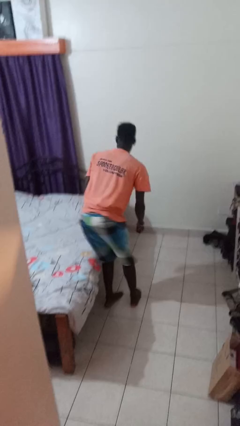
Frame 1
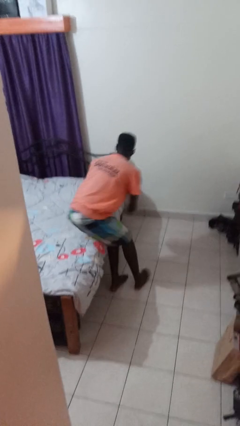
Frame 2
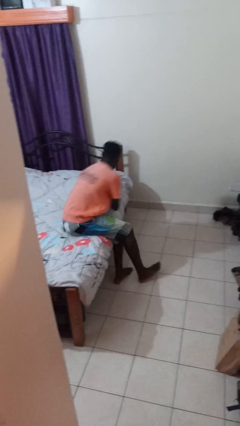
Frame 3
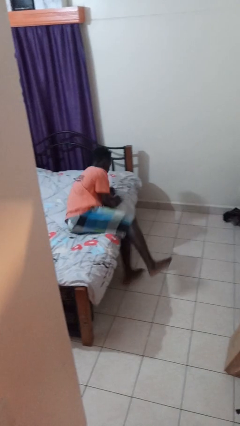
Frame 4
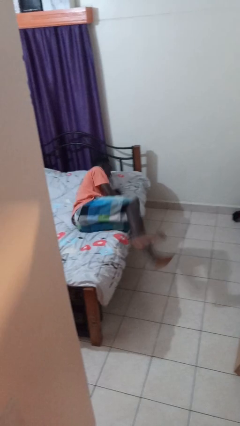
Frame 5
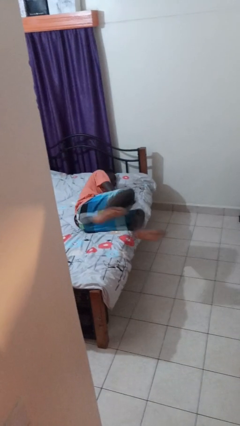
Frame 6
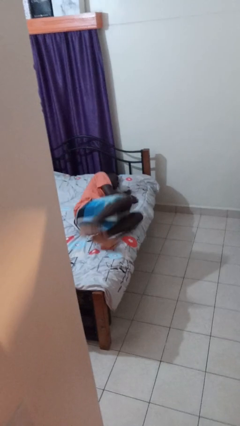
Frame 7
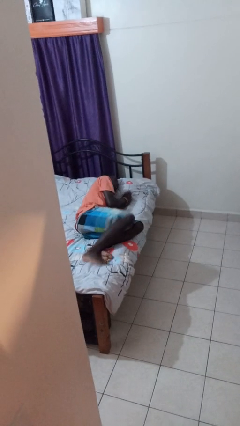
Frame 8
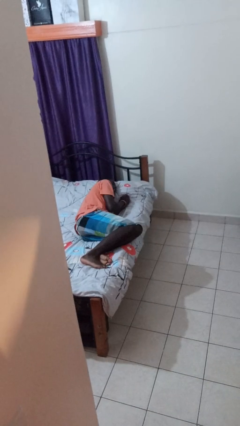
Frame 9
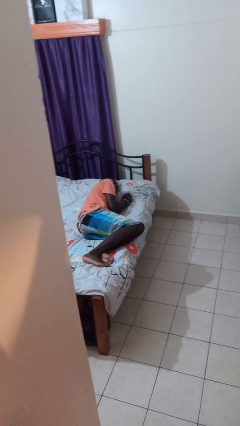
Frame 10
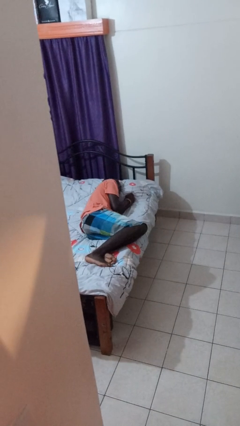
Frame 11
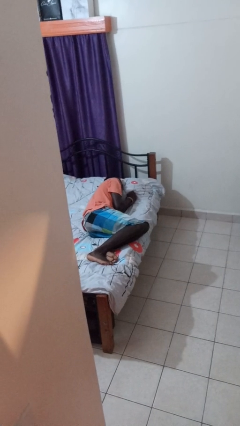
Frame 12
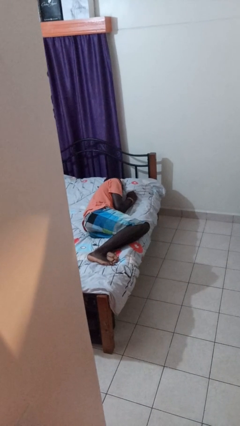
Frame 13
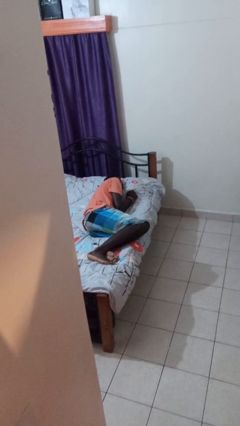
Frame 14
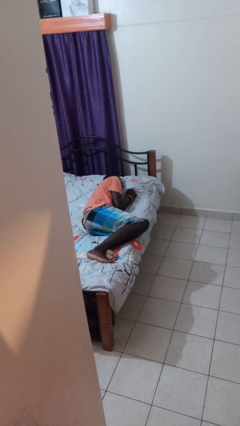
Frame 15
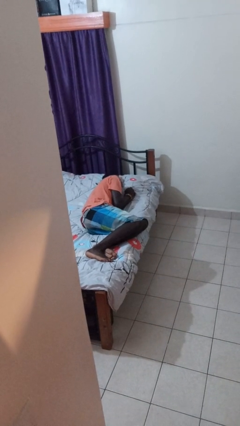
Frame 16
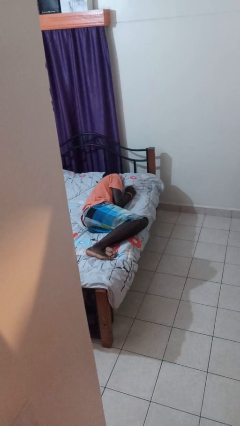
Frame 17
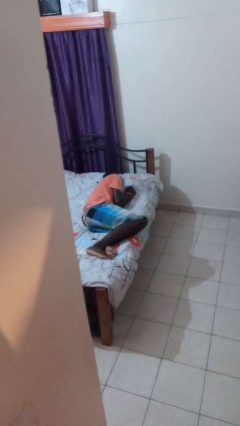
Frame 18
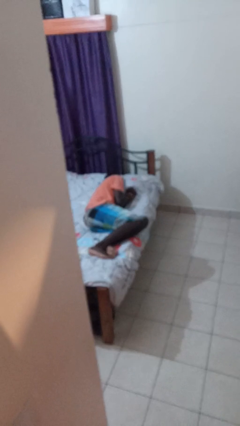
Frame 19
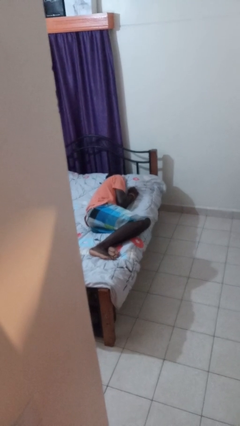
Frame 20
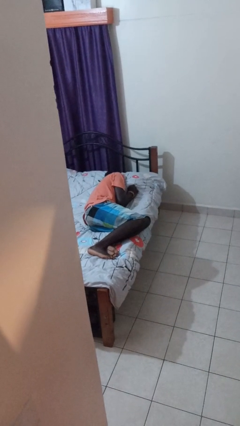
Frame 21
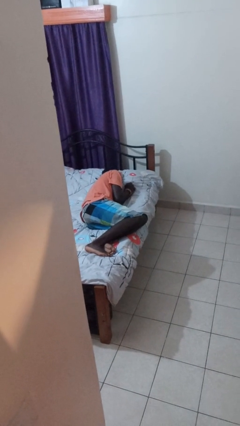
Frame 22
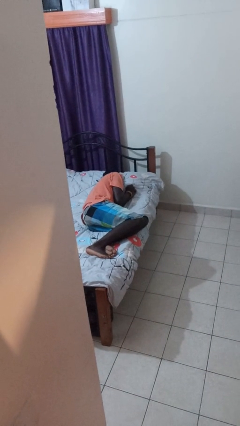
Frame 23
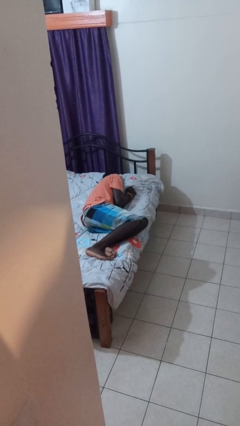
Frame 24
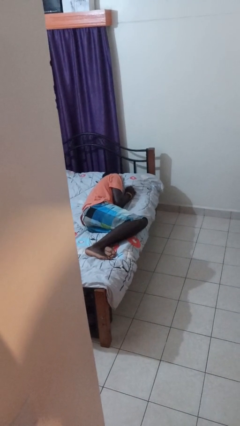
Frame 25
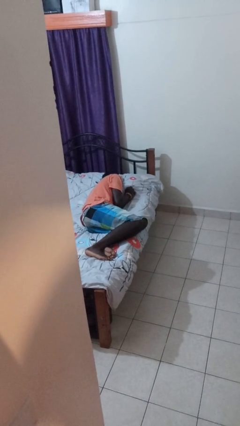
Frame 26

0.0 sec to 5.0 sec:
person lies down on bed

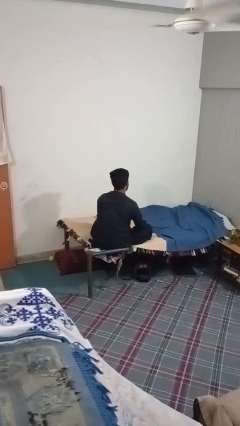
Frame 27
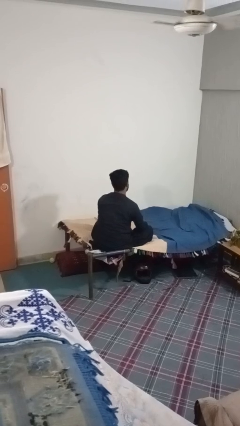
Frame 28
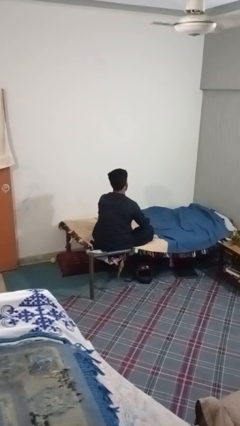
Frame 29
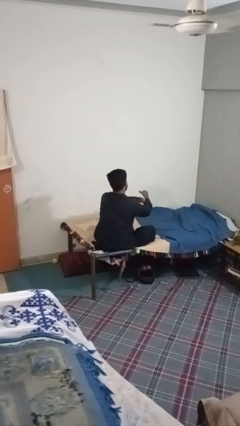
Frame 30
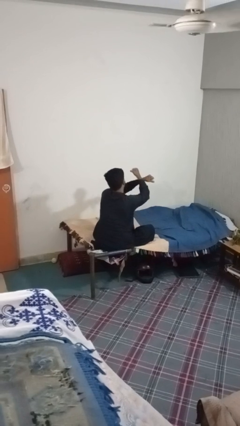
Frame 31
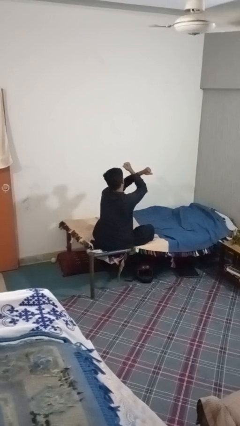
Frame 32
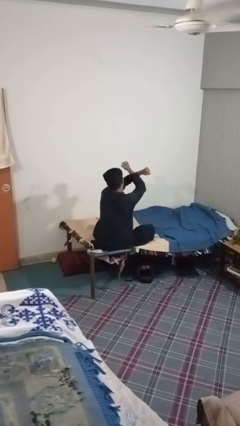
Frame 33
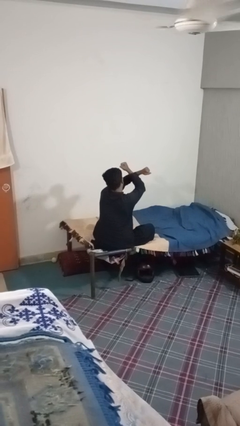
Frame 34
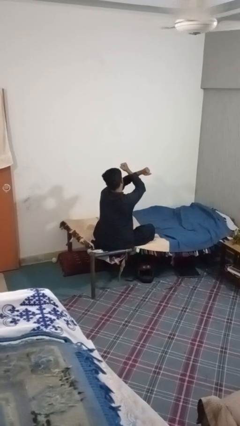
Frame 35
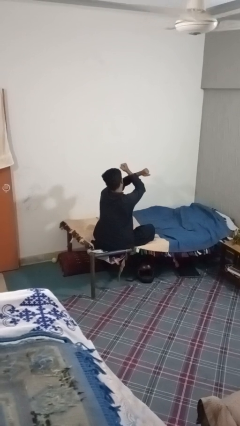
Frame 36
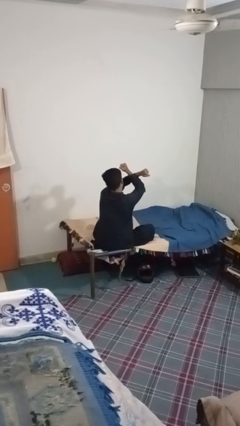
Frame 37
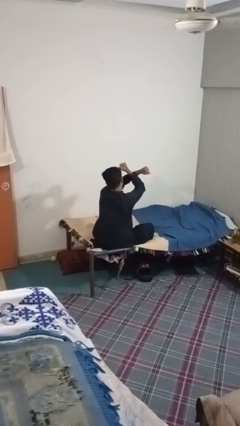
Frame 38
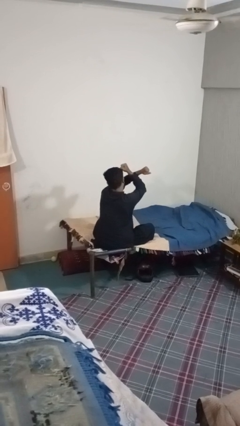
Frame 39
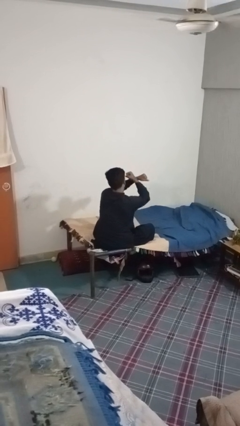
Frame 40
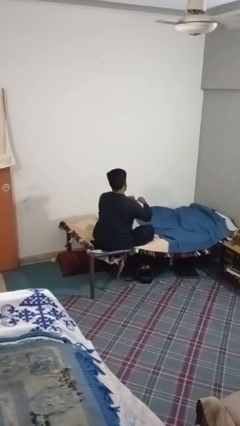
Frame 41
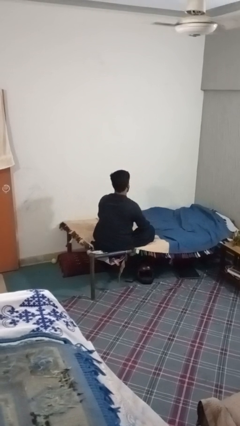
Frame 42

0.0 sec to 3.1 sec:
person gestures arms x

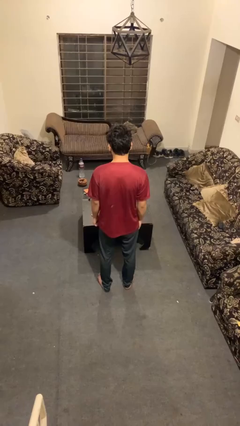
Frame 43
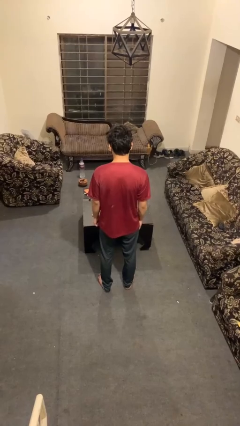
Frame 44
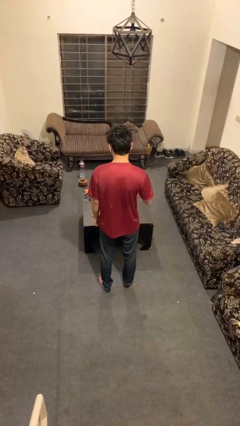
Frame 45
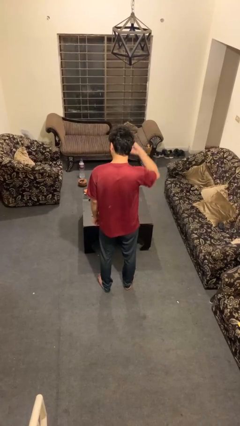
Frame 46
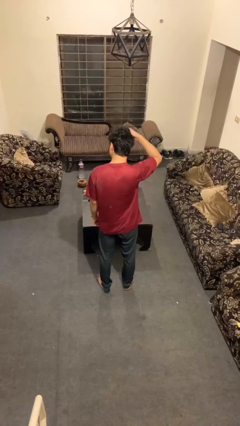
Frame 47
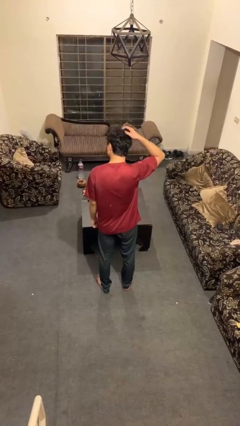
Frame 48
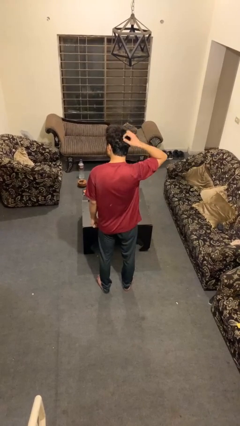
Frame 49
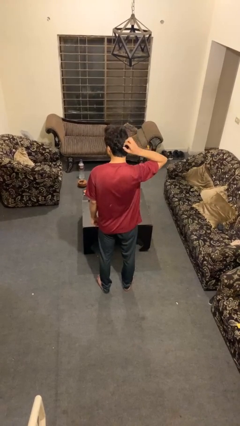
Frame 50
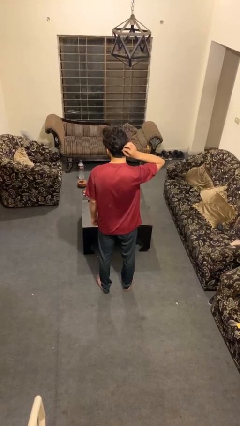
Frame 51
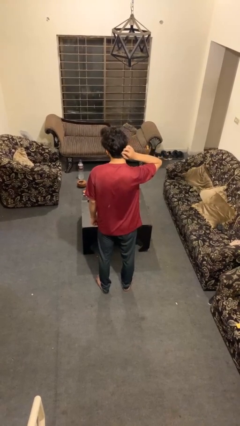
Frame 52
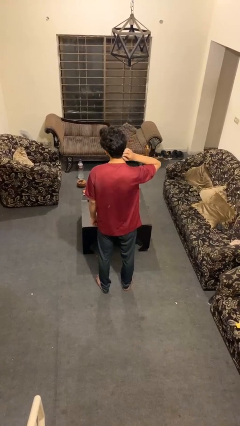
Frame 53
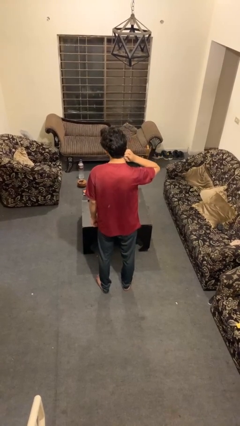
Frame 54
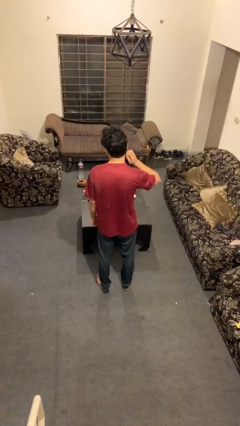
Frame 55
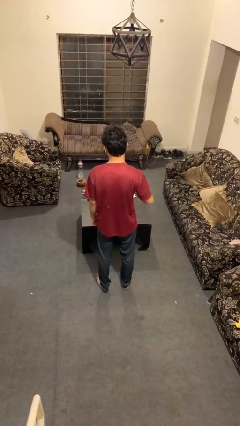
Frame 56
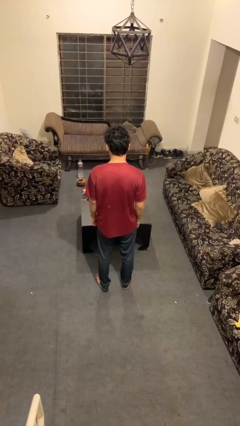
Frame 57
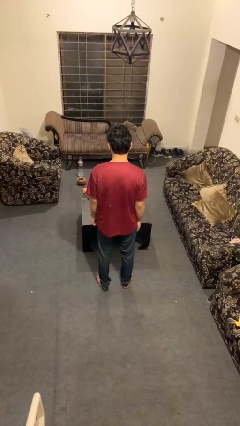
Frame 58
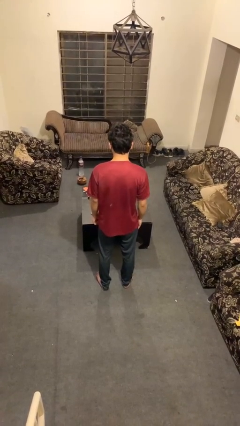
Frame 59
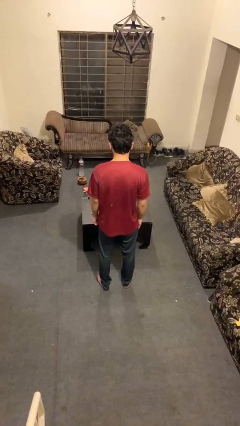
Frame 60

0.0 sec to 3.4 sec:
person strokes hair

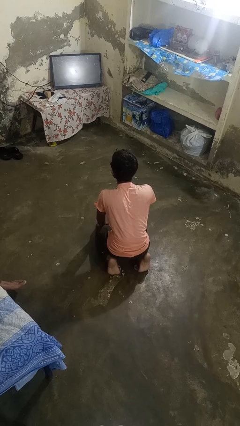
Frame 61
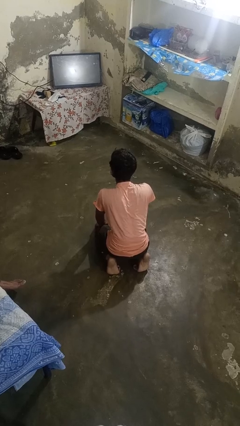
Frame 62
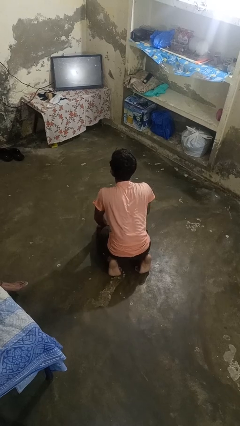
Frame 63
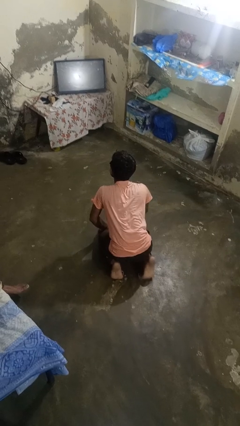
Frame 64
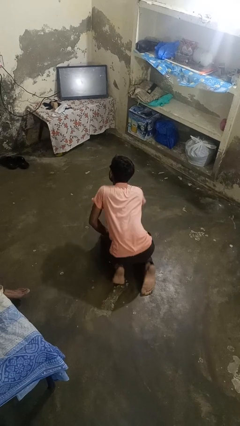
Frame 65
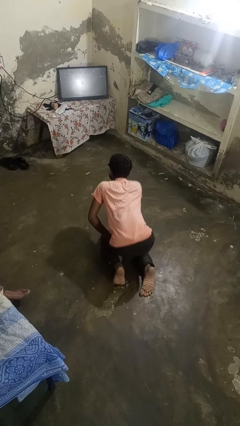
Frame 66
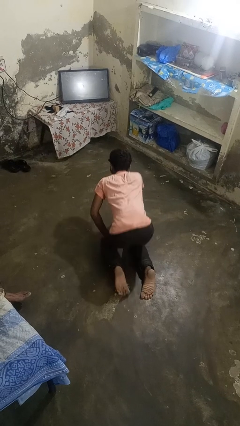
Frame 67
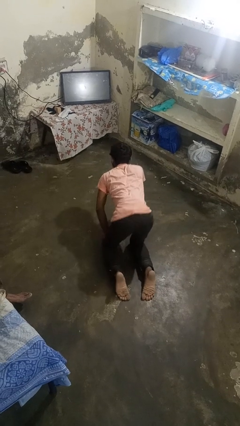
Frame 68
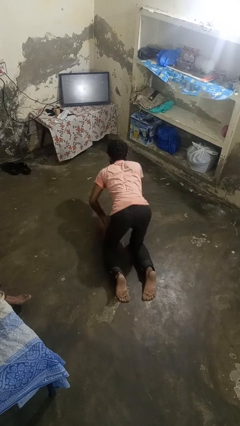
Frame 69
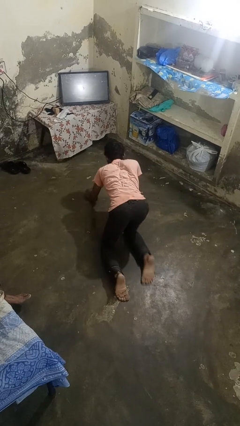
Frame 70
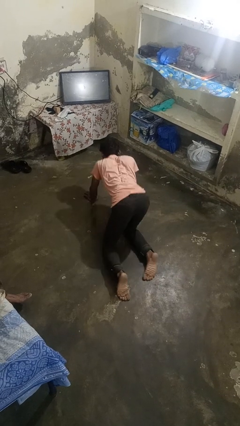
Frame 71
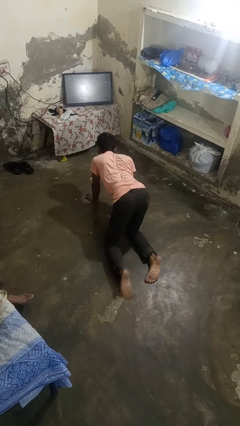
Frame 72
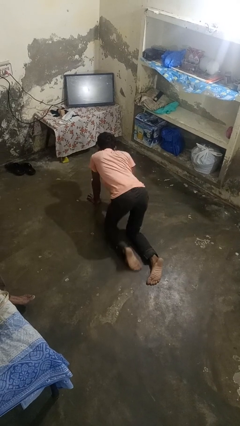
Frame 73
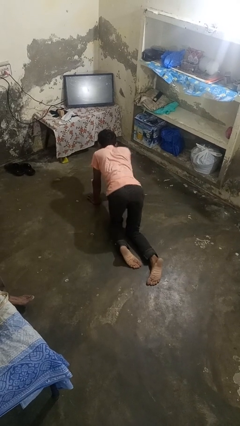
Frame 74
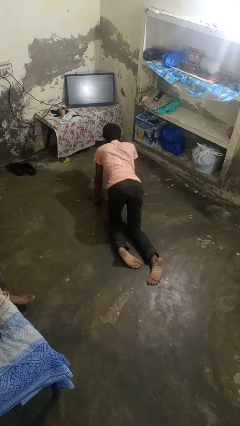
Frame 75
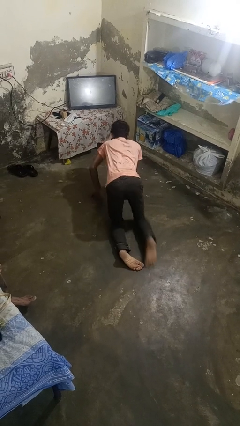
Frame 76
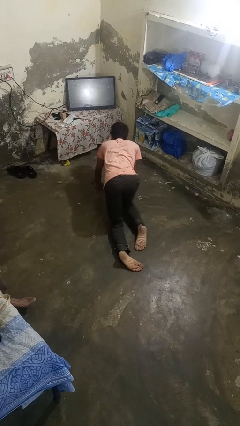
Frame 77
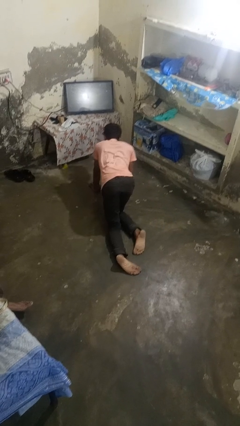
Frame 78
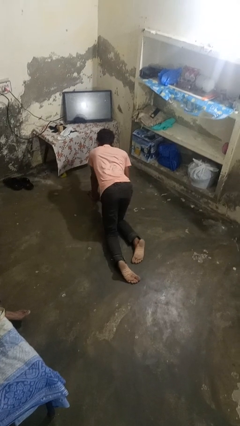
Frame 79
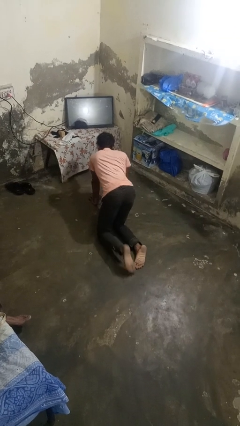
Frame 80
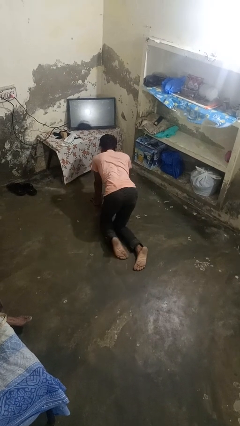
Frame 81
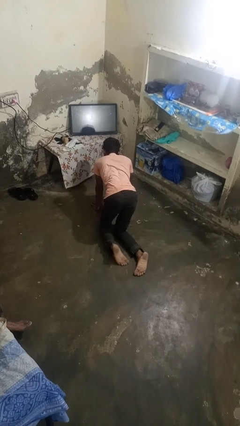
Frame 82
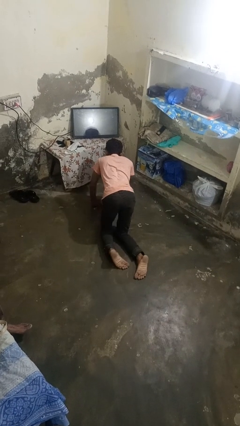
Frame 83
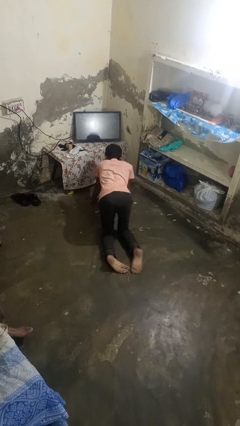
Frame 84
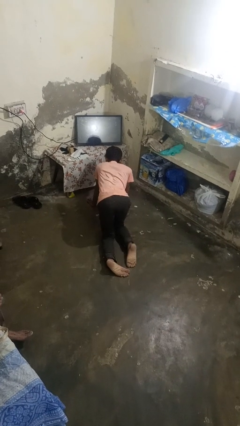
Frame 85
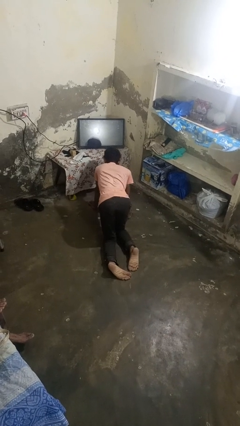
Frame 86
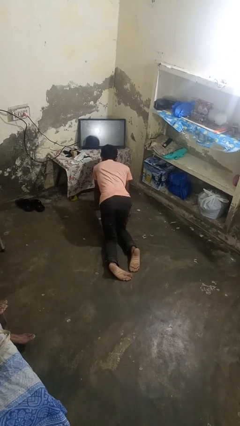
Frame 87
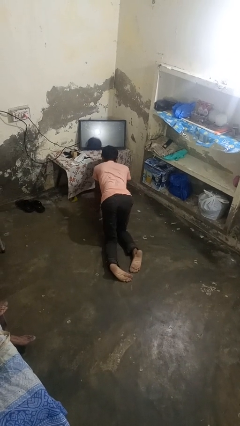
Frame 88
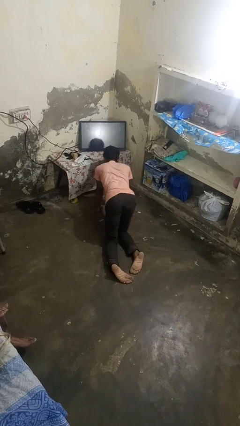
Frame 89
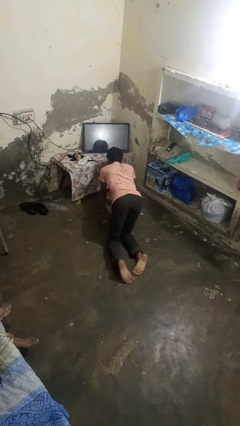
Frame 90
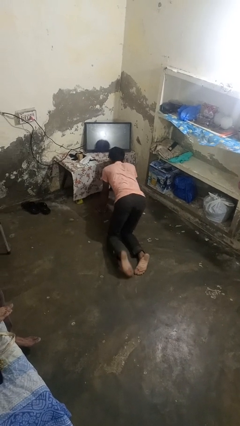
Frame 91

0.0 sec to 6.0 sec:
person crawls

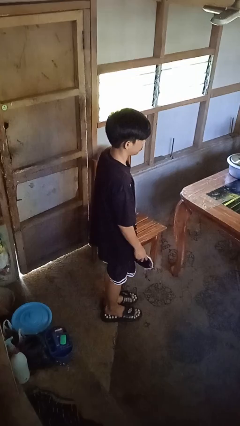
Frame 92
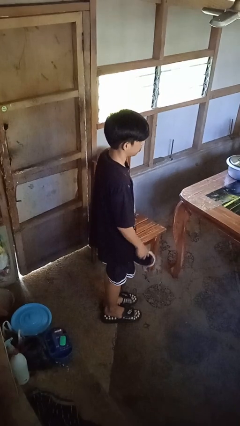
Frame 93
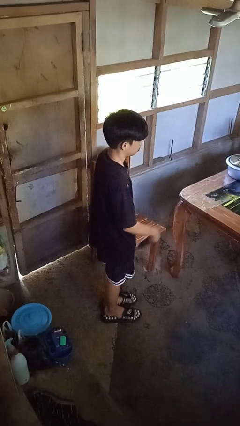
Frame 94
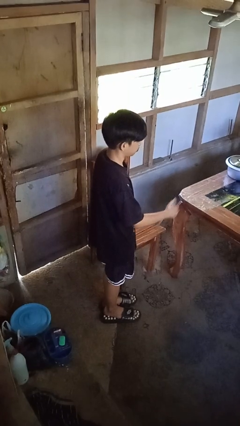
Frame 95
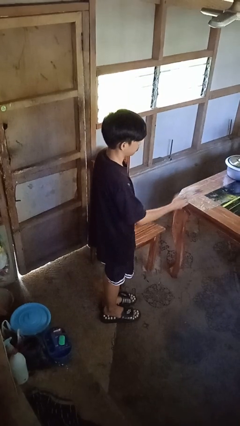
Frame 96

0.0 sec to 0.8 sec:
person throws object on table
